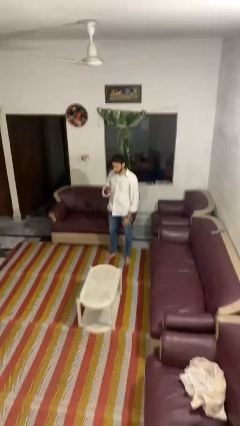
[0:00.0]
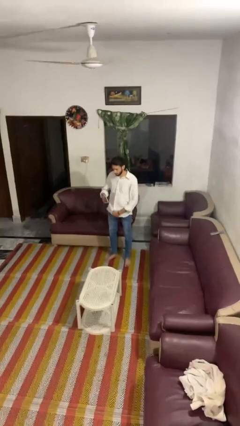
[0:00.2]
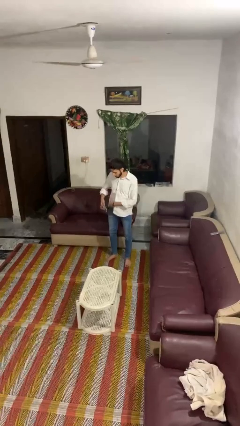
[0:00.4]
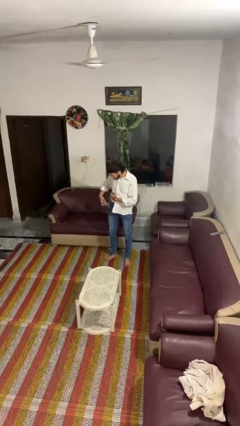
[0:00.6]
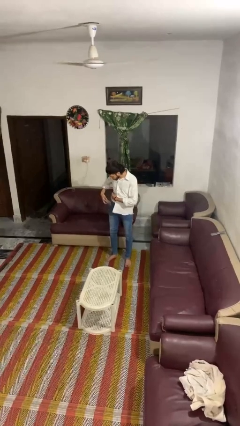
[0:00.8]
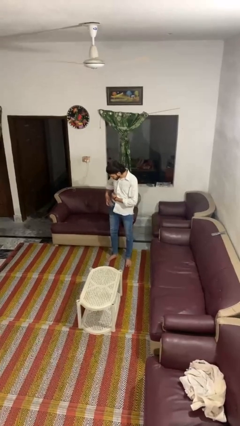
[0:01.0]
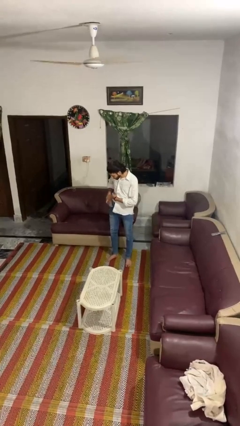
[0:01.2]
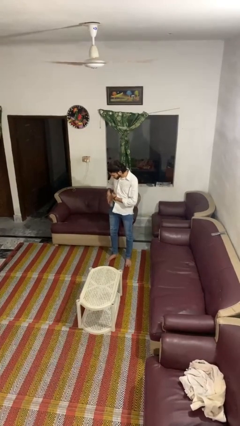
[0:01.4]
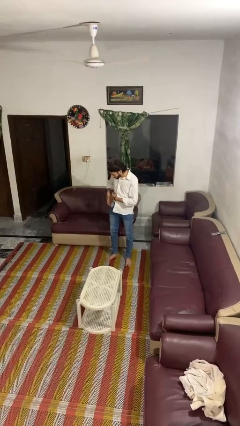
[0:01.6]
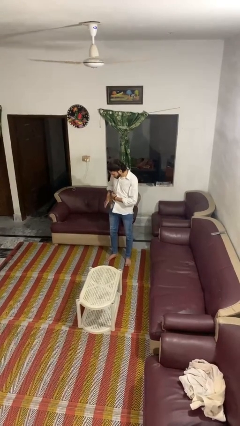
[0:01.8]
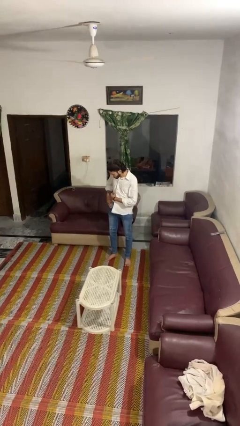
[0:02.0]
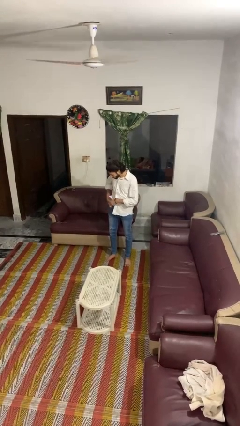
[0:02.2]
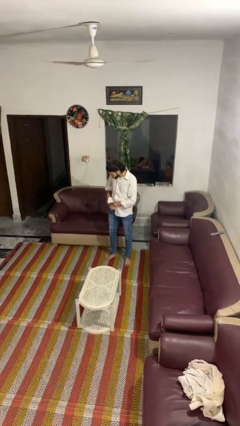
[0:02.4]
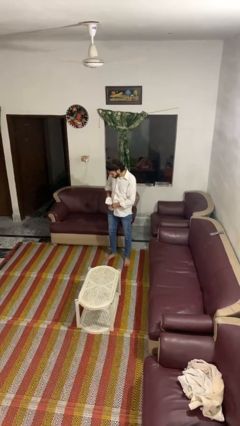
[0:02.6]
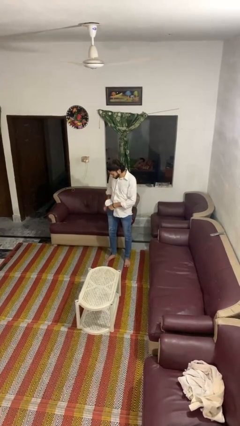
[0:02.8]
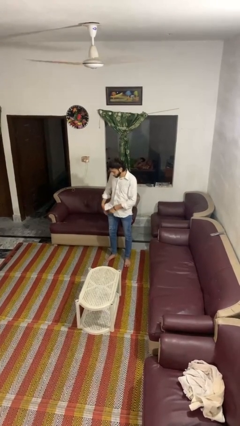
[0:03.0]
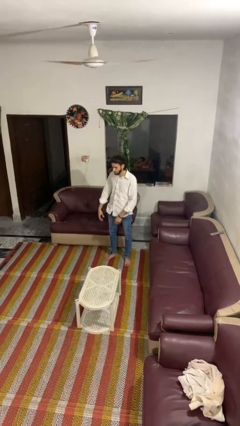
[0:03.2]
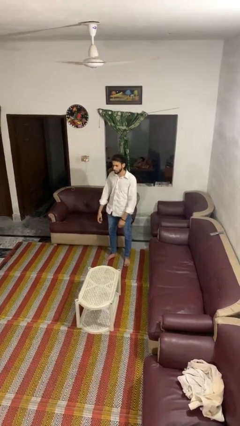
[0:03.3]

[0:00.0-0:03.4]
person puts phone into pocket

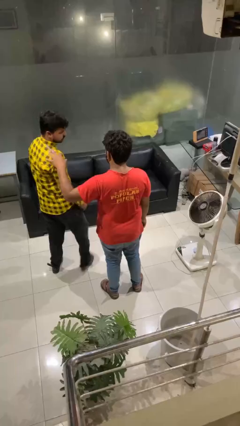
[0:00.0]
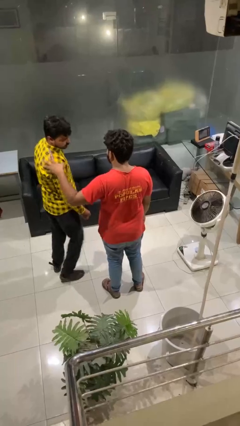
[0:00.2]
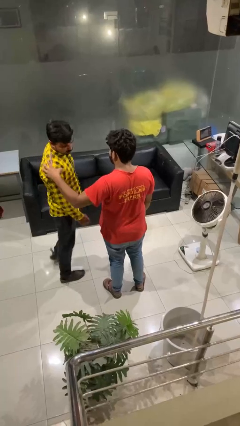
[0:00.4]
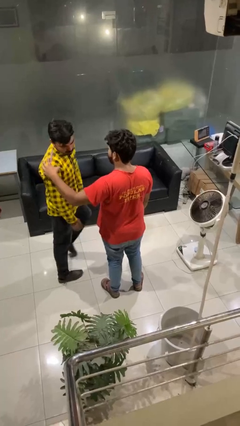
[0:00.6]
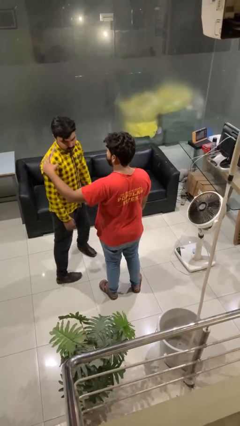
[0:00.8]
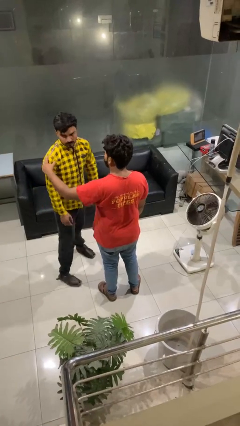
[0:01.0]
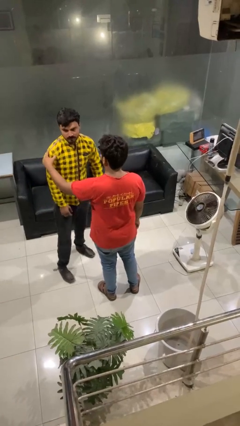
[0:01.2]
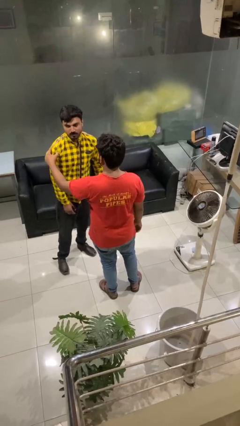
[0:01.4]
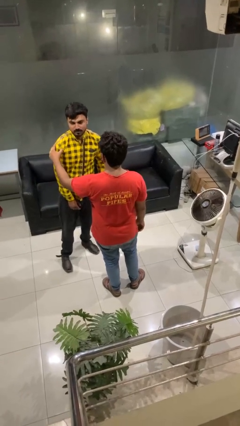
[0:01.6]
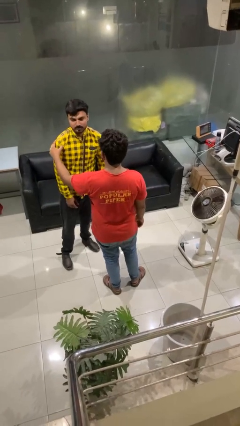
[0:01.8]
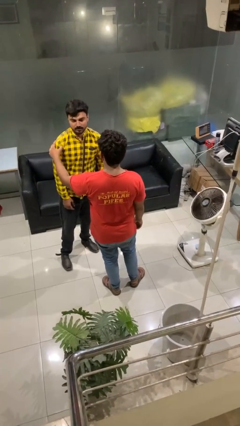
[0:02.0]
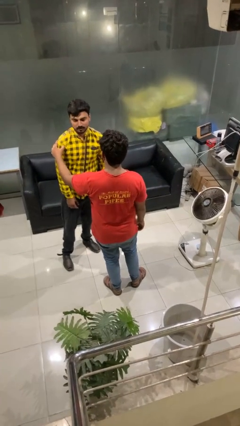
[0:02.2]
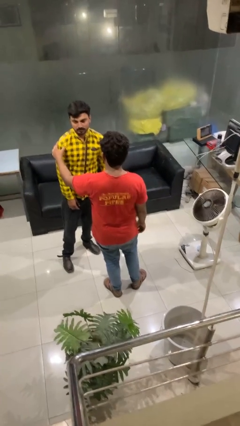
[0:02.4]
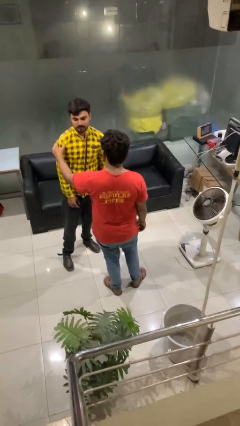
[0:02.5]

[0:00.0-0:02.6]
person spins person around

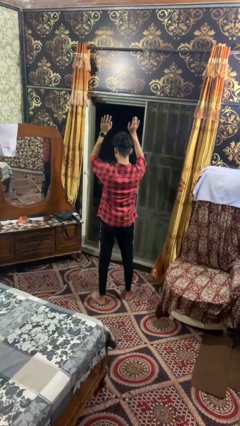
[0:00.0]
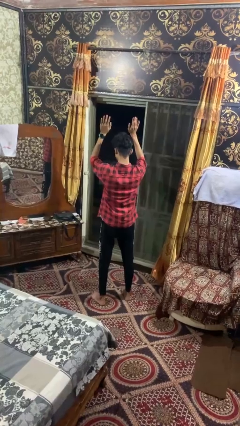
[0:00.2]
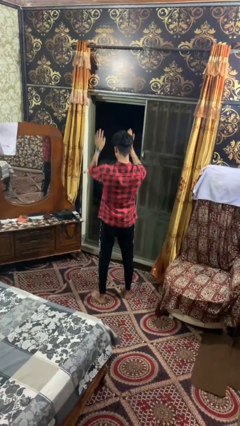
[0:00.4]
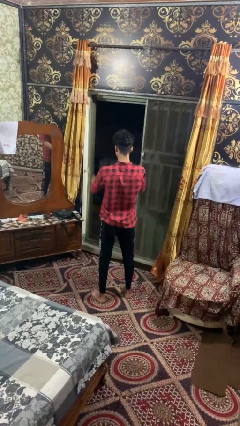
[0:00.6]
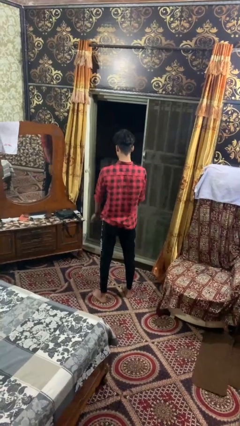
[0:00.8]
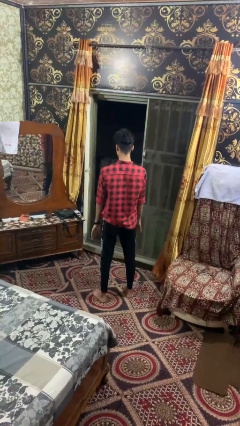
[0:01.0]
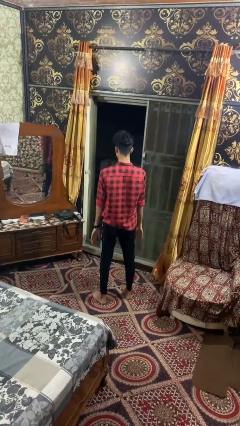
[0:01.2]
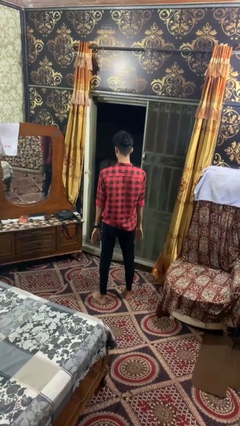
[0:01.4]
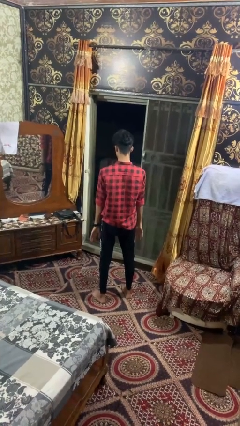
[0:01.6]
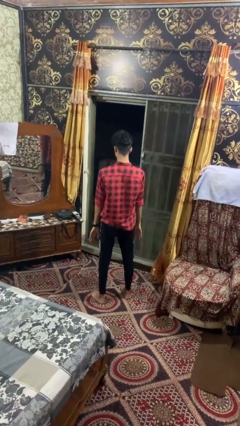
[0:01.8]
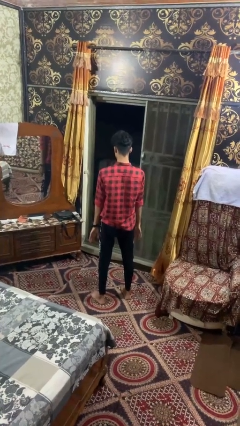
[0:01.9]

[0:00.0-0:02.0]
person gestures swipe down

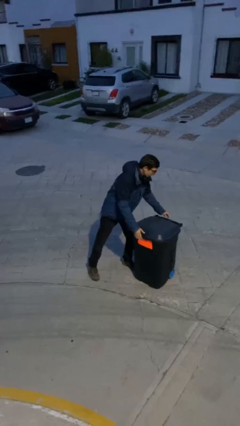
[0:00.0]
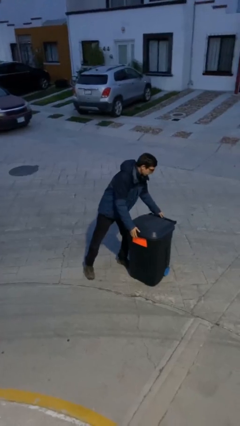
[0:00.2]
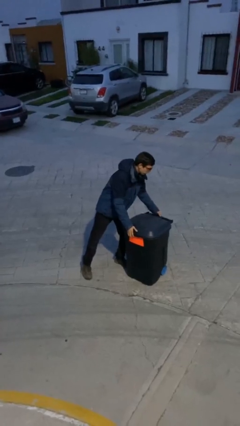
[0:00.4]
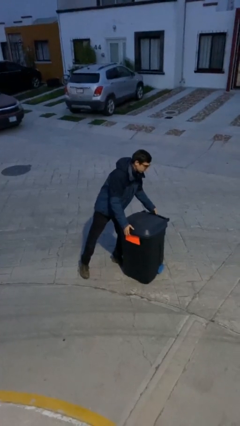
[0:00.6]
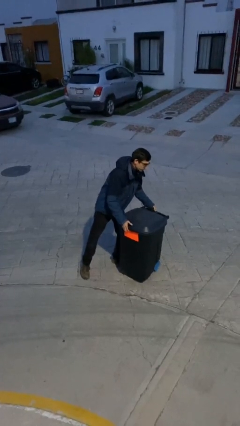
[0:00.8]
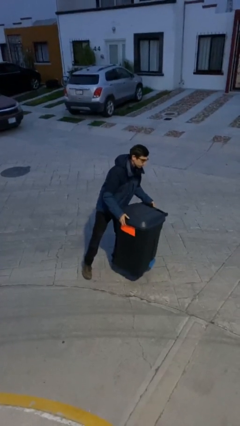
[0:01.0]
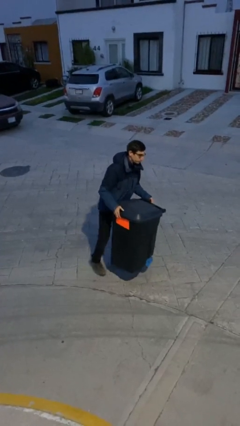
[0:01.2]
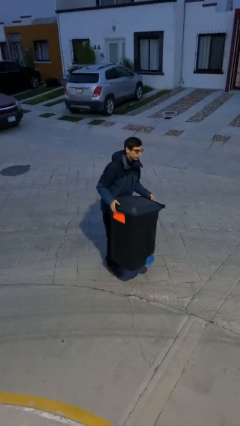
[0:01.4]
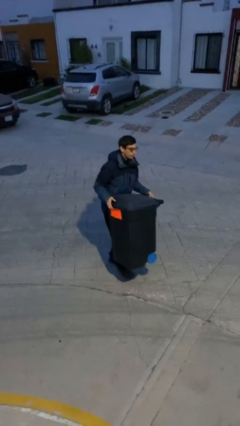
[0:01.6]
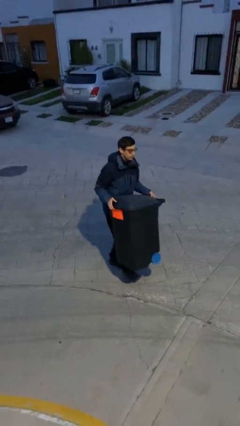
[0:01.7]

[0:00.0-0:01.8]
person picks up object from floor

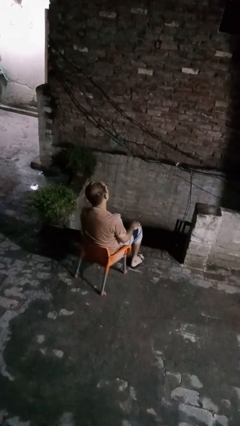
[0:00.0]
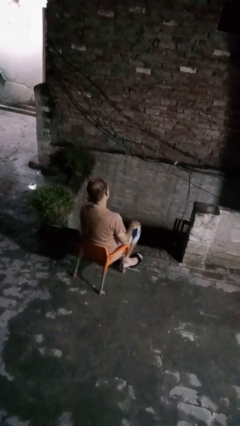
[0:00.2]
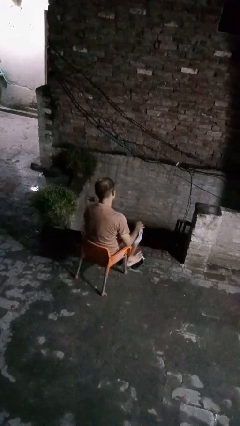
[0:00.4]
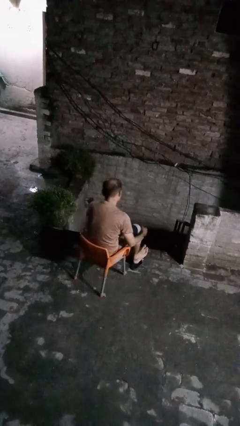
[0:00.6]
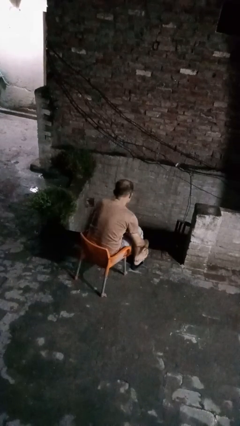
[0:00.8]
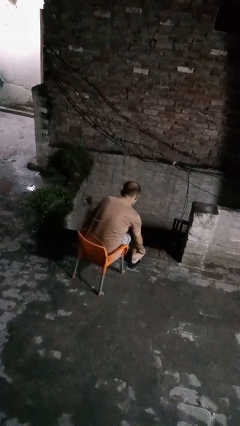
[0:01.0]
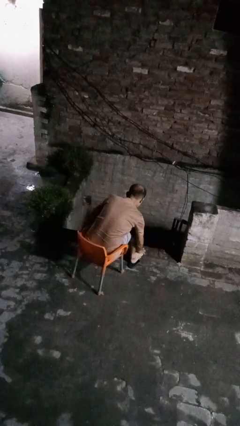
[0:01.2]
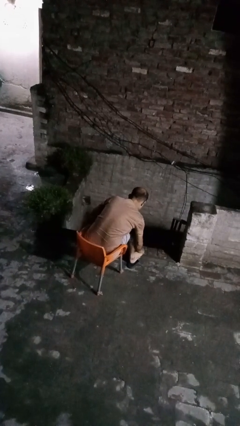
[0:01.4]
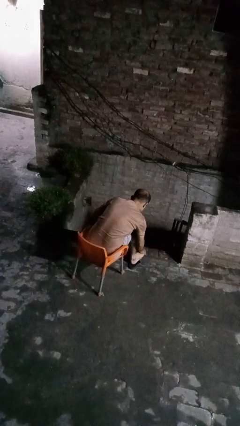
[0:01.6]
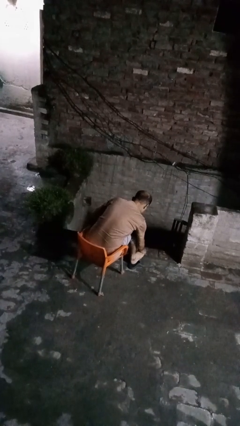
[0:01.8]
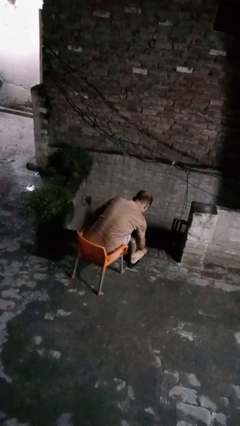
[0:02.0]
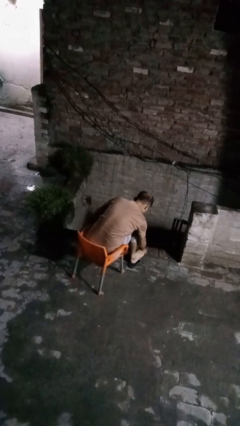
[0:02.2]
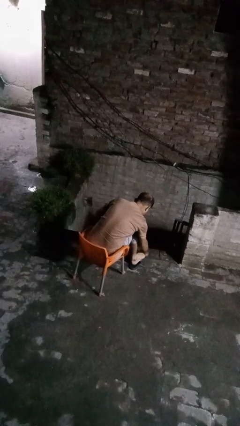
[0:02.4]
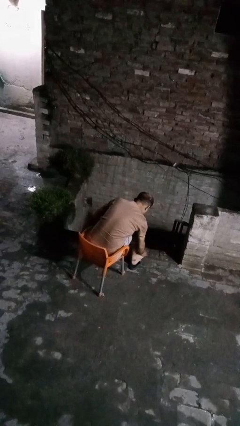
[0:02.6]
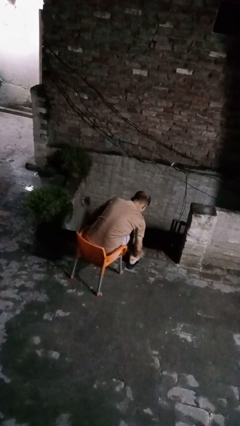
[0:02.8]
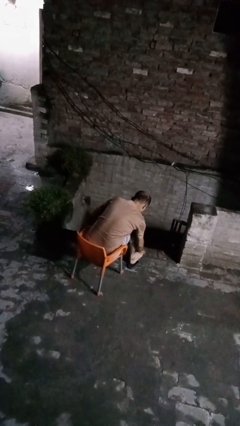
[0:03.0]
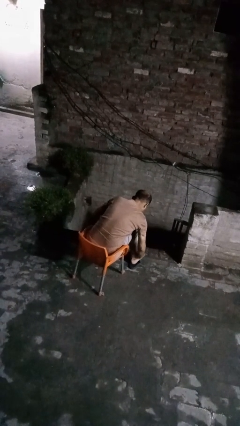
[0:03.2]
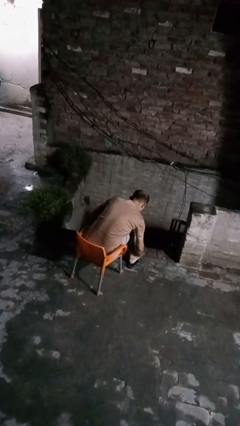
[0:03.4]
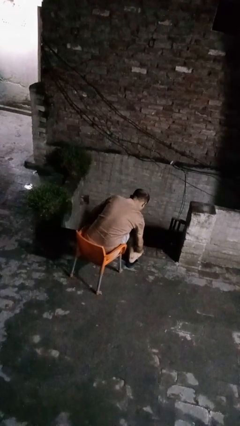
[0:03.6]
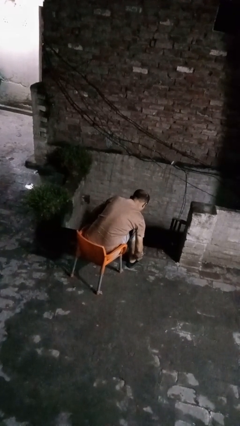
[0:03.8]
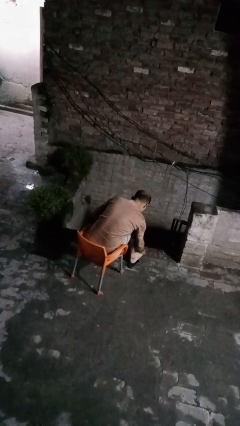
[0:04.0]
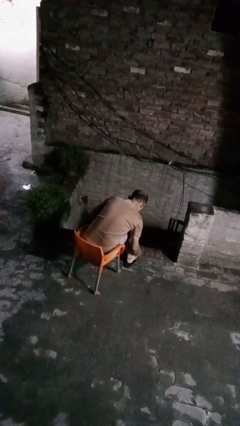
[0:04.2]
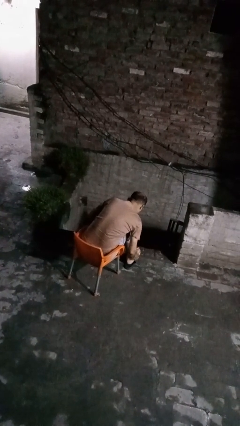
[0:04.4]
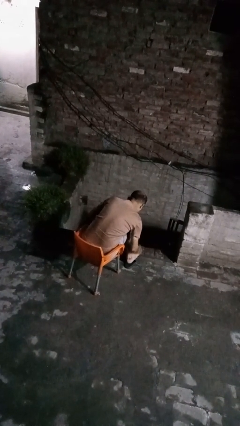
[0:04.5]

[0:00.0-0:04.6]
person rubs foot

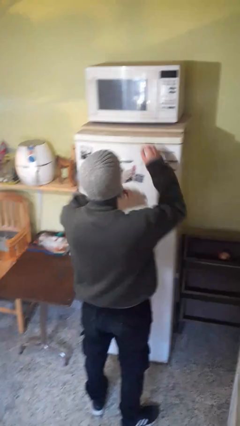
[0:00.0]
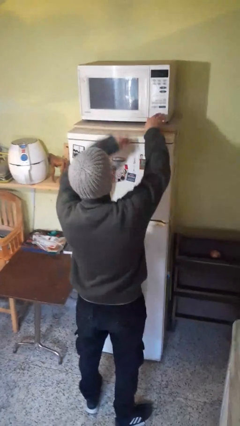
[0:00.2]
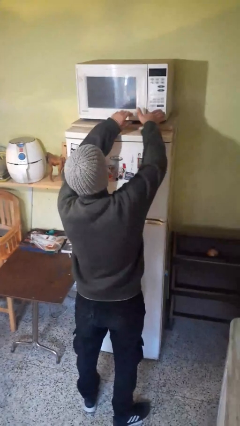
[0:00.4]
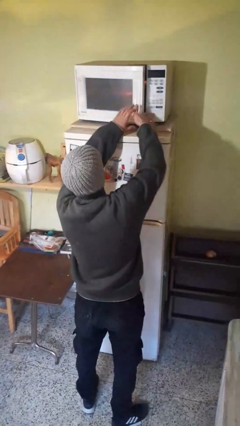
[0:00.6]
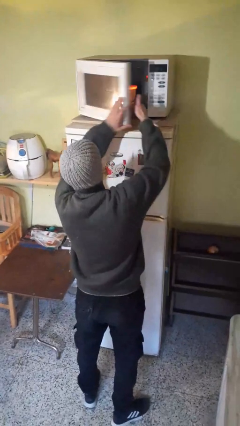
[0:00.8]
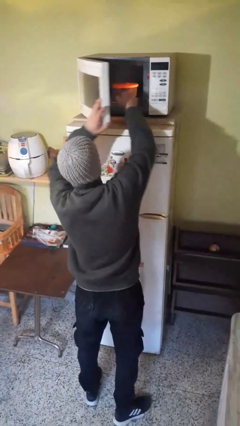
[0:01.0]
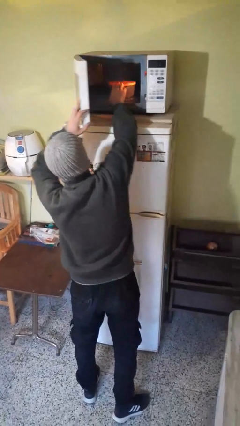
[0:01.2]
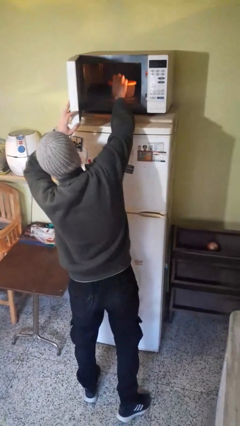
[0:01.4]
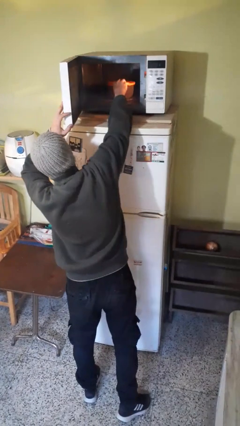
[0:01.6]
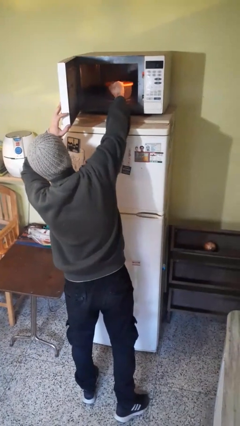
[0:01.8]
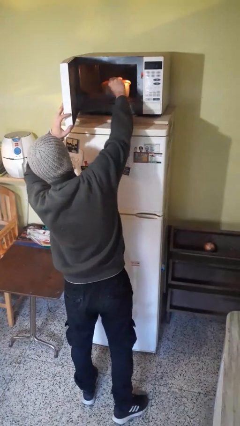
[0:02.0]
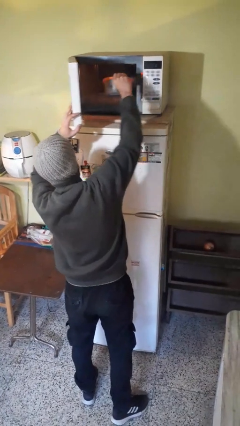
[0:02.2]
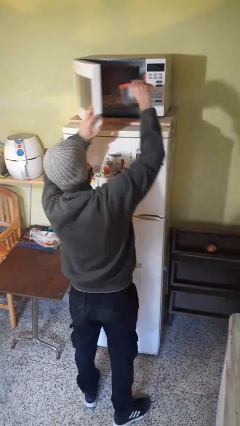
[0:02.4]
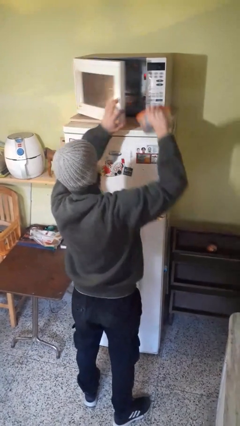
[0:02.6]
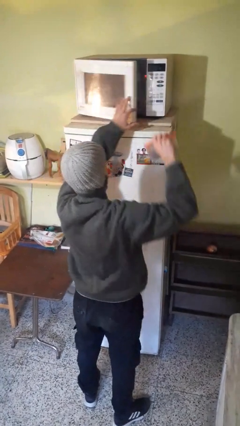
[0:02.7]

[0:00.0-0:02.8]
person takes object from microwave
